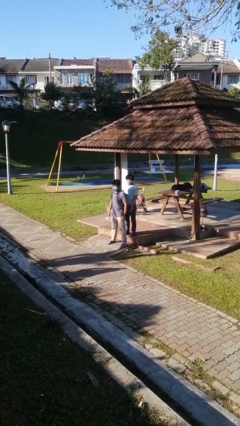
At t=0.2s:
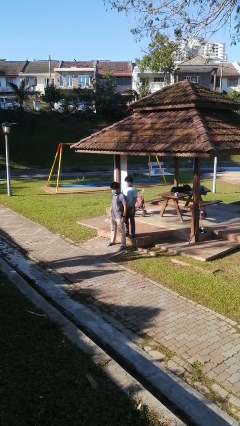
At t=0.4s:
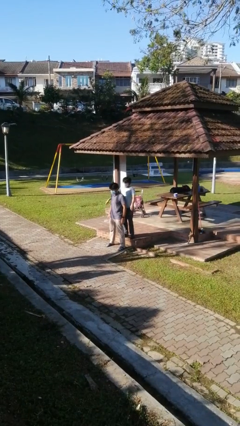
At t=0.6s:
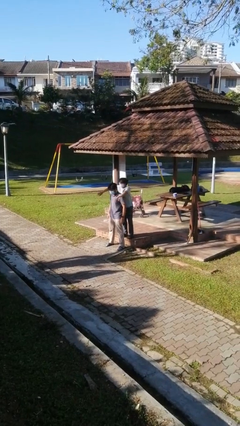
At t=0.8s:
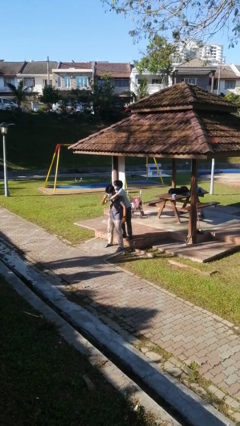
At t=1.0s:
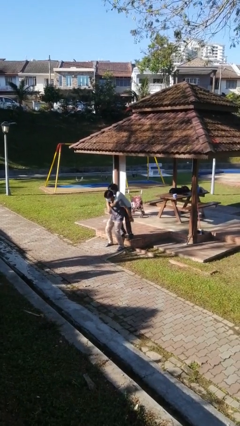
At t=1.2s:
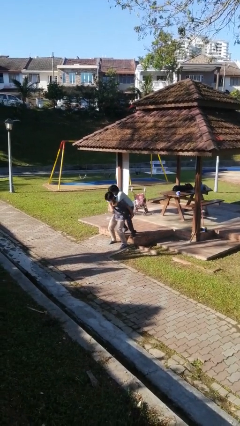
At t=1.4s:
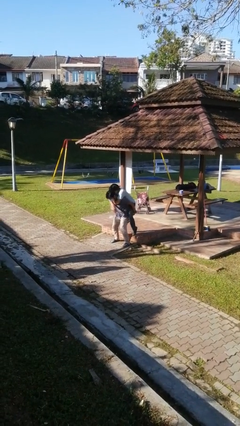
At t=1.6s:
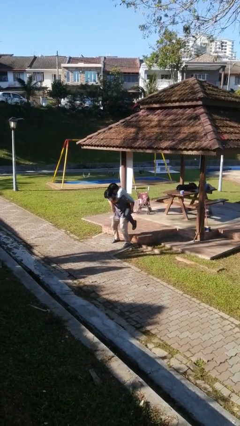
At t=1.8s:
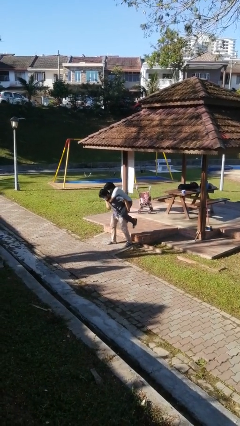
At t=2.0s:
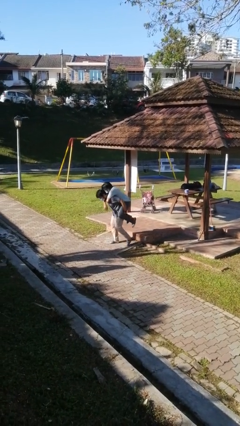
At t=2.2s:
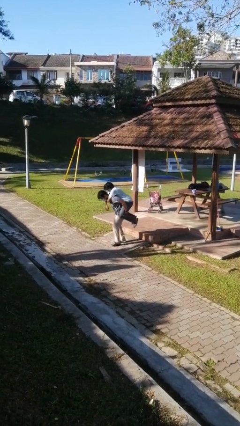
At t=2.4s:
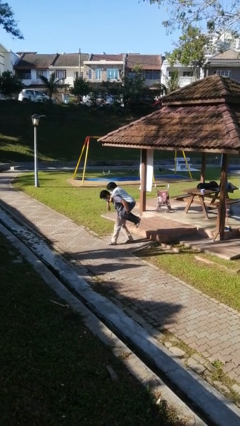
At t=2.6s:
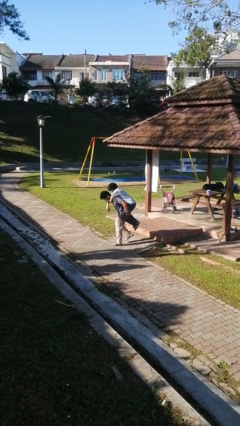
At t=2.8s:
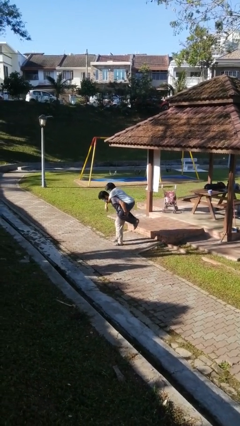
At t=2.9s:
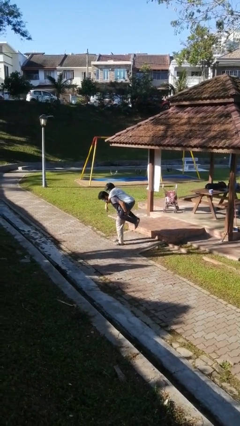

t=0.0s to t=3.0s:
person carries person over shoulder

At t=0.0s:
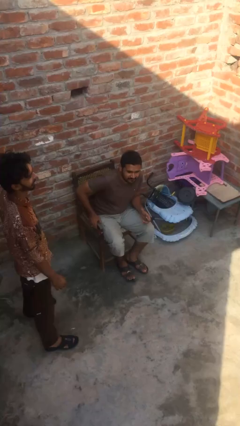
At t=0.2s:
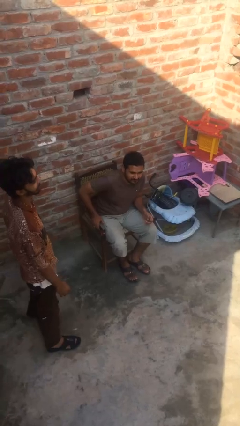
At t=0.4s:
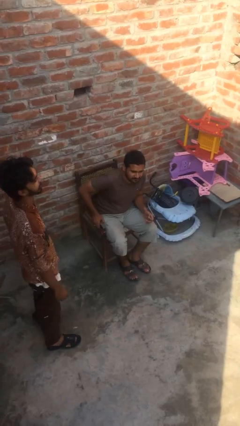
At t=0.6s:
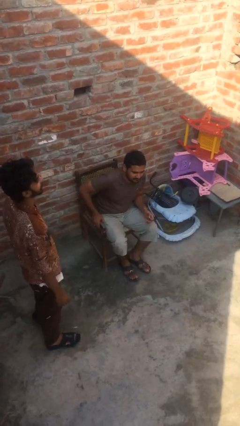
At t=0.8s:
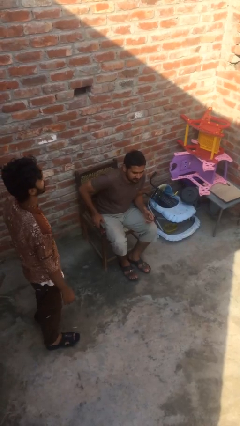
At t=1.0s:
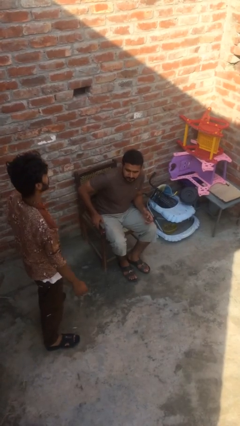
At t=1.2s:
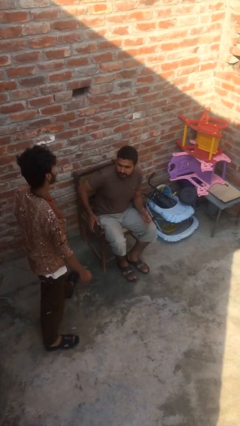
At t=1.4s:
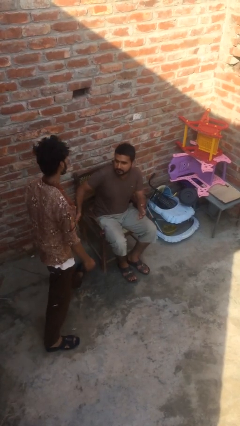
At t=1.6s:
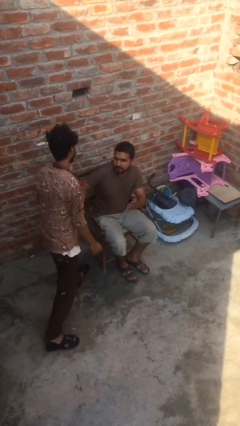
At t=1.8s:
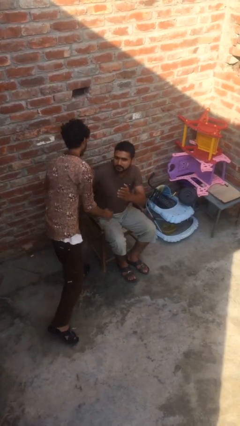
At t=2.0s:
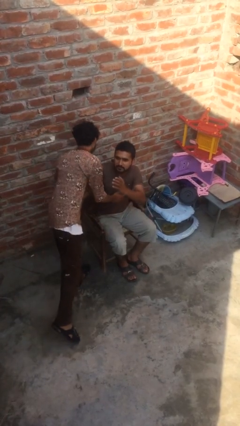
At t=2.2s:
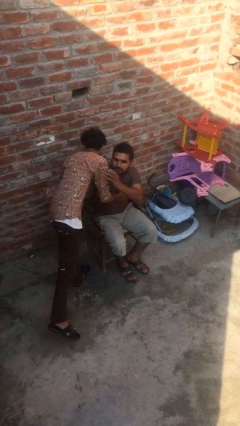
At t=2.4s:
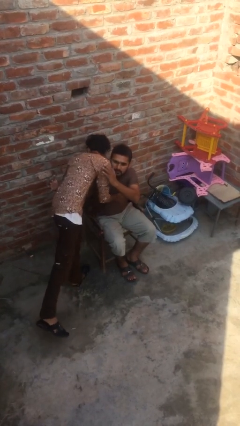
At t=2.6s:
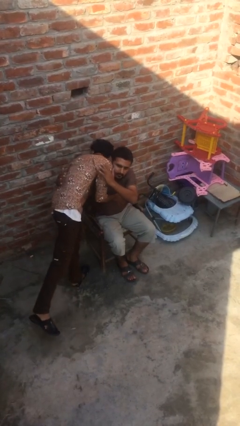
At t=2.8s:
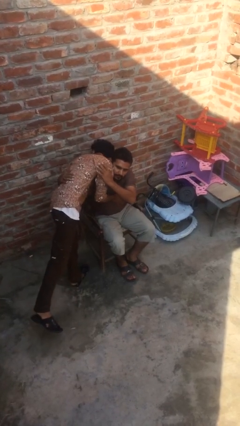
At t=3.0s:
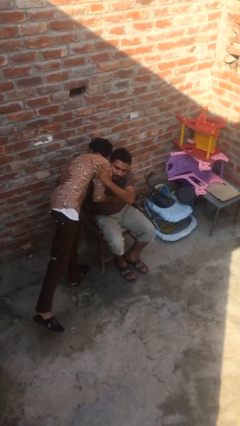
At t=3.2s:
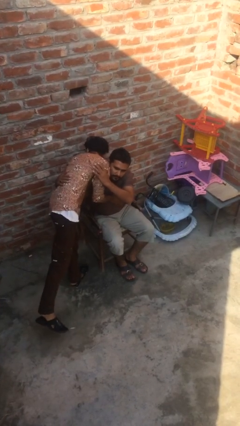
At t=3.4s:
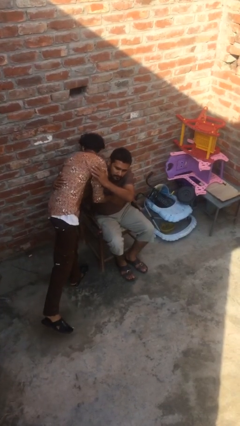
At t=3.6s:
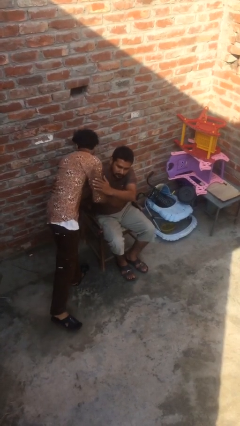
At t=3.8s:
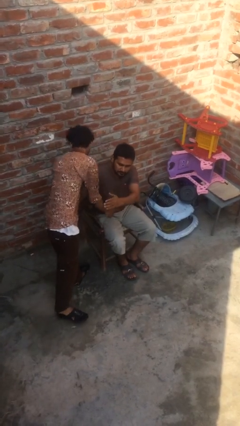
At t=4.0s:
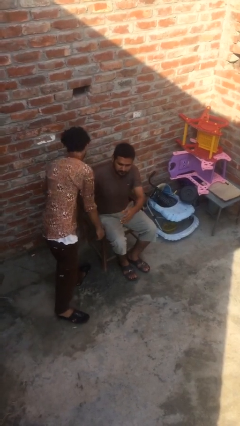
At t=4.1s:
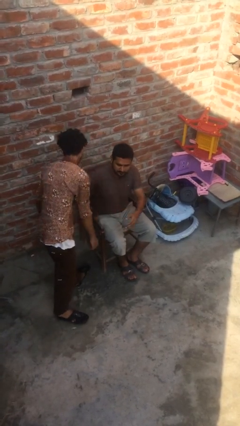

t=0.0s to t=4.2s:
person embraces person

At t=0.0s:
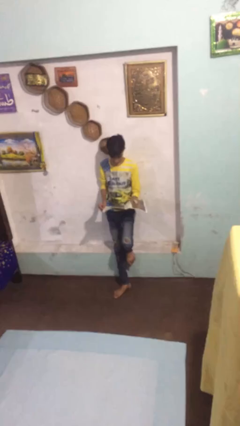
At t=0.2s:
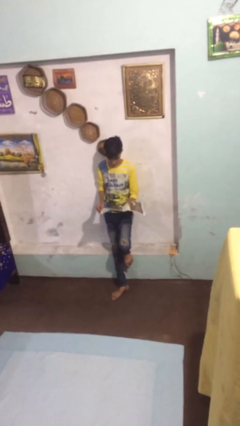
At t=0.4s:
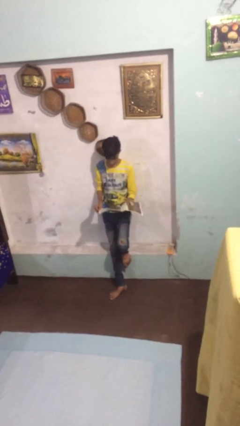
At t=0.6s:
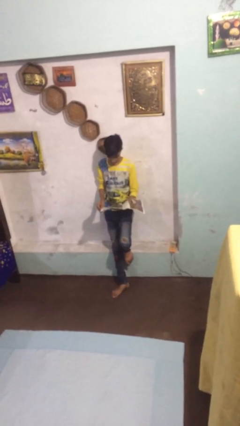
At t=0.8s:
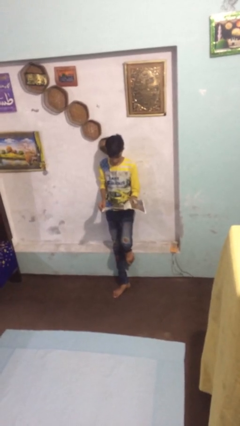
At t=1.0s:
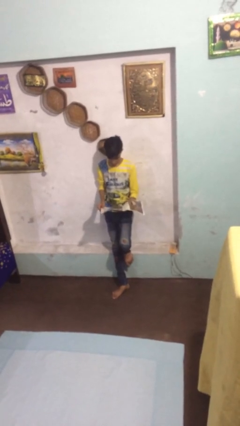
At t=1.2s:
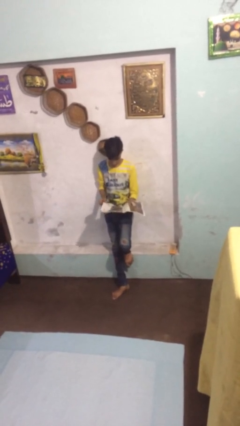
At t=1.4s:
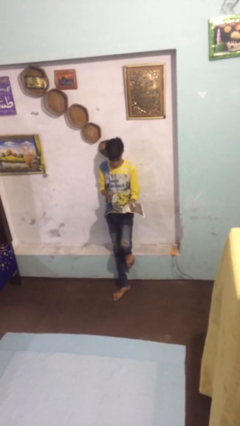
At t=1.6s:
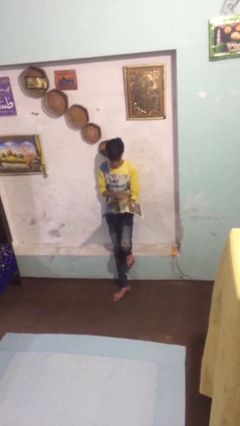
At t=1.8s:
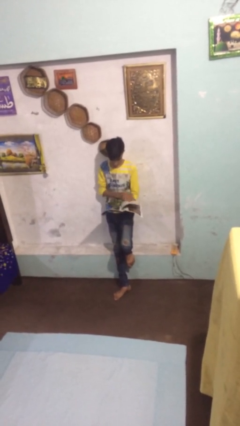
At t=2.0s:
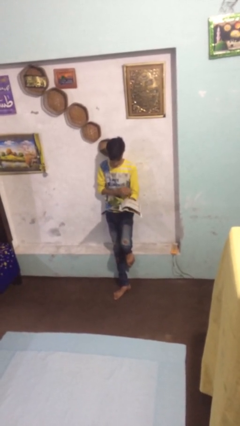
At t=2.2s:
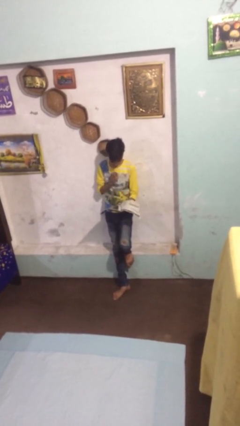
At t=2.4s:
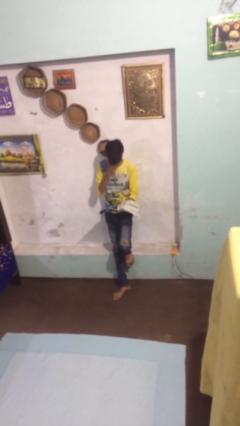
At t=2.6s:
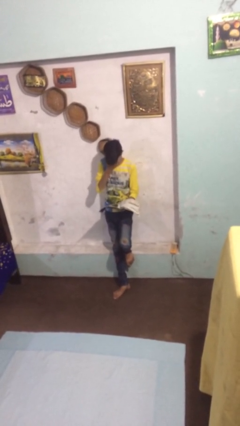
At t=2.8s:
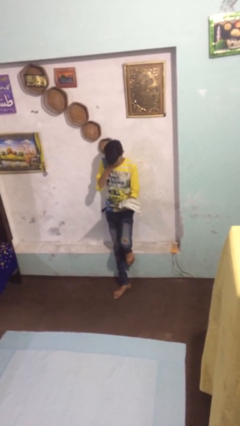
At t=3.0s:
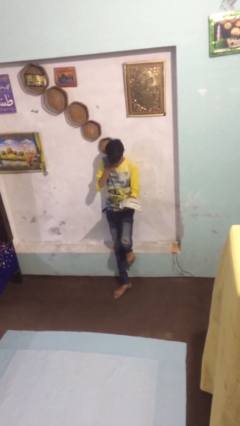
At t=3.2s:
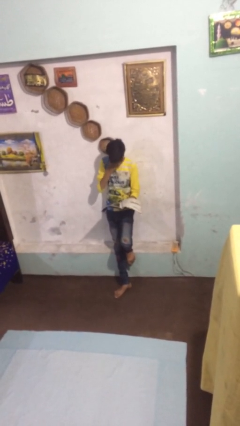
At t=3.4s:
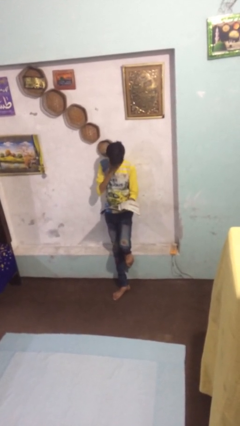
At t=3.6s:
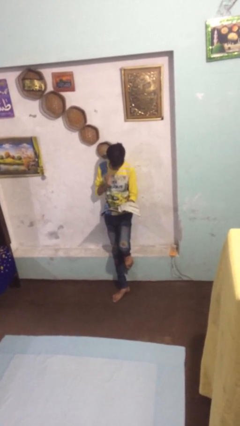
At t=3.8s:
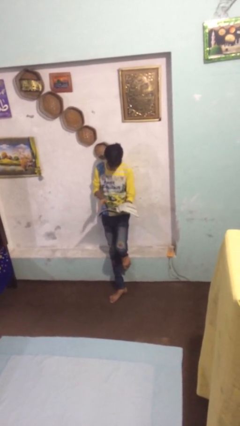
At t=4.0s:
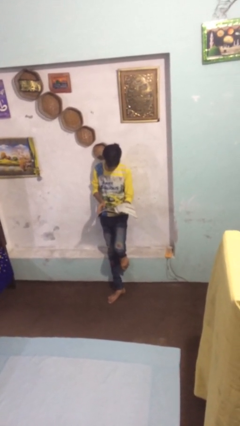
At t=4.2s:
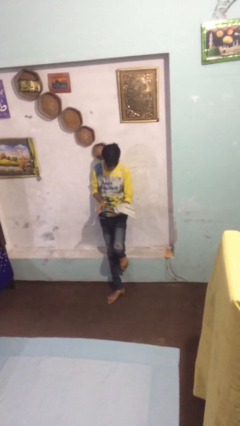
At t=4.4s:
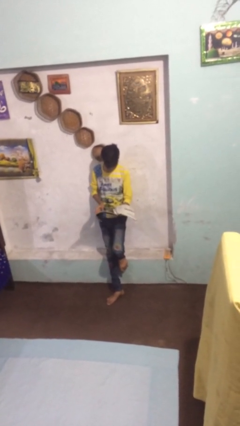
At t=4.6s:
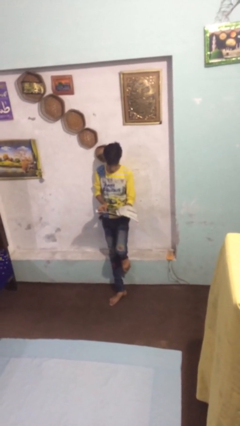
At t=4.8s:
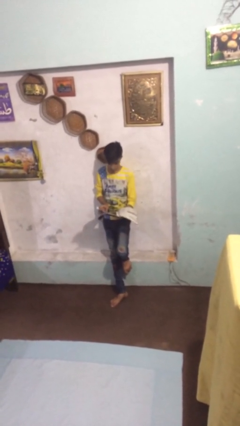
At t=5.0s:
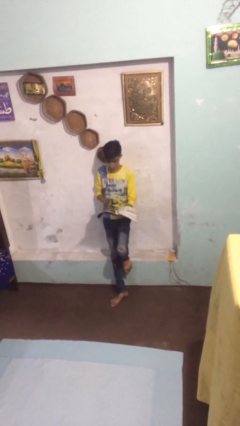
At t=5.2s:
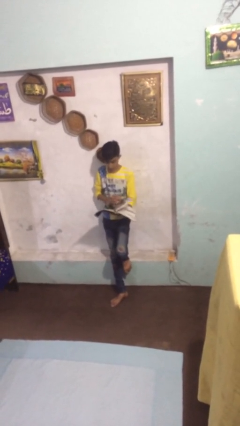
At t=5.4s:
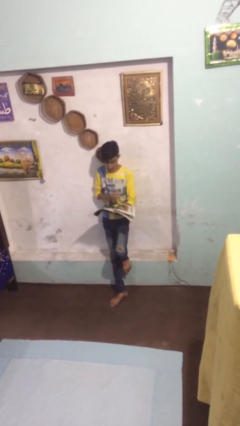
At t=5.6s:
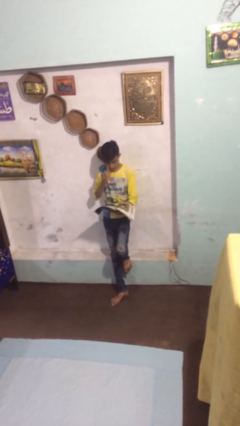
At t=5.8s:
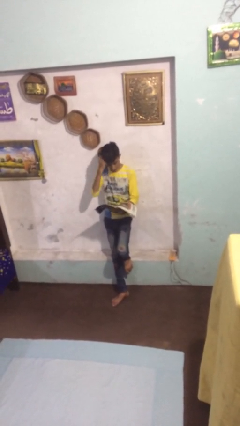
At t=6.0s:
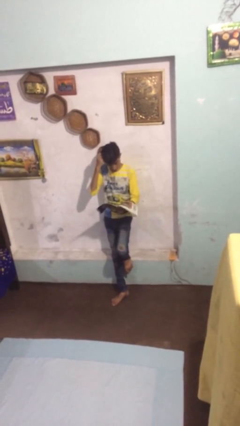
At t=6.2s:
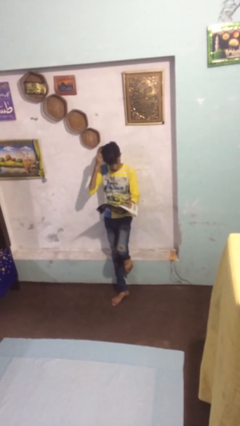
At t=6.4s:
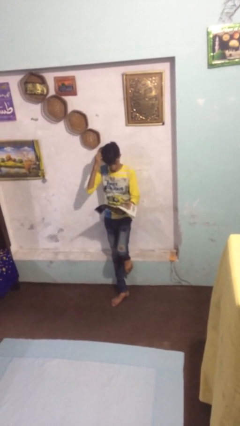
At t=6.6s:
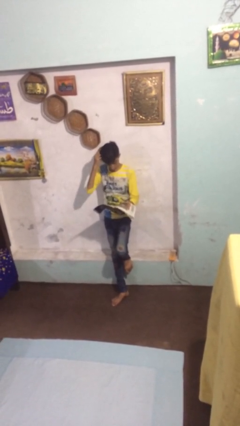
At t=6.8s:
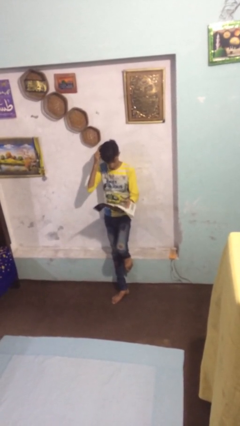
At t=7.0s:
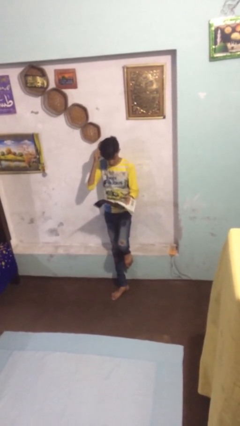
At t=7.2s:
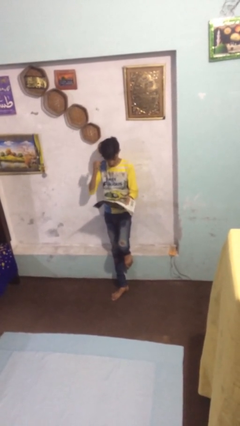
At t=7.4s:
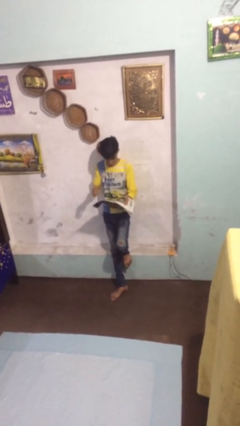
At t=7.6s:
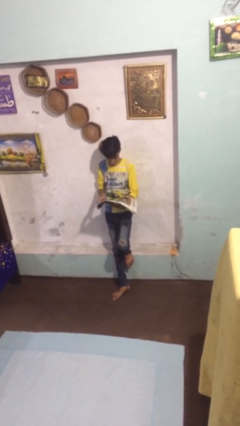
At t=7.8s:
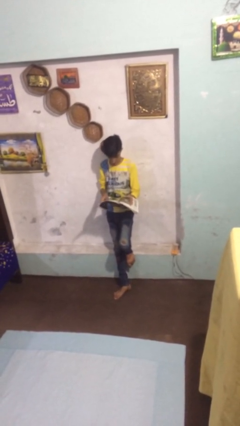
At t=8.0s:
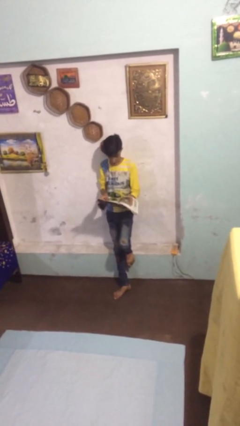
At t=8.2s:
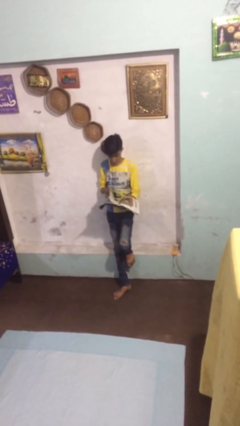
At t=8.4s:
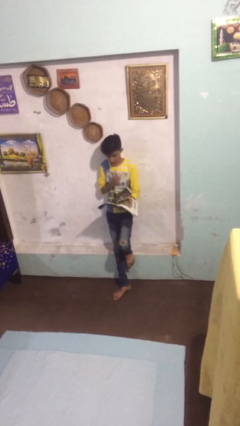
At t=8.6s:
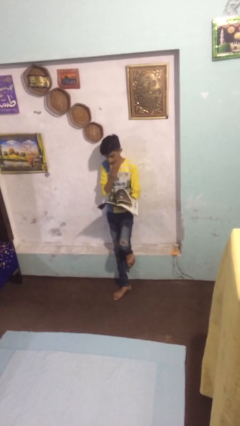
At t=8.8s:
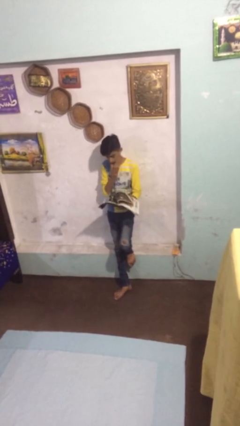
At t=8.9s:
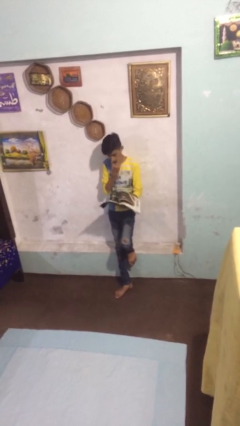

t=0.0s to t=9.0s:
person reads document

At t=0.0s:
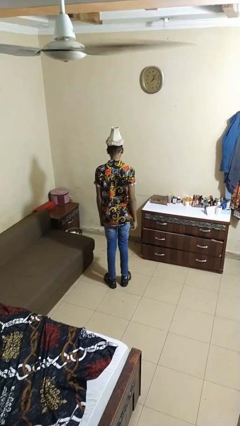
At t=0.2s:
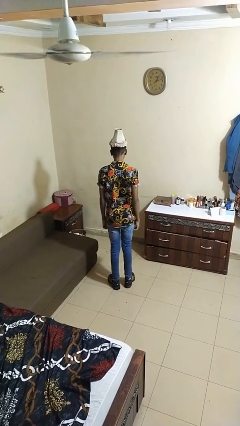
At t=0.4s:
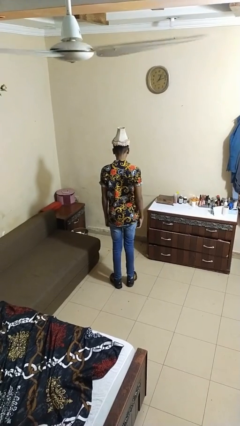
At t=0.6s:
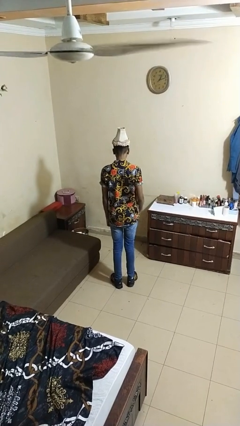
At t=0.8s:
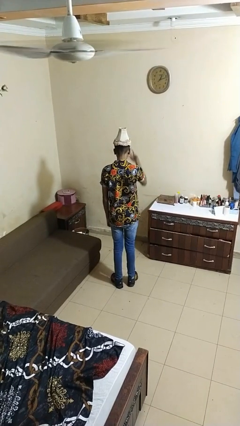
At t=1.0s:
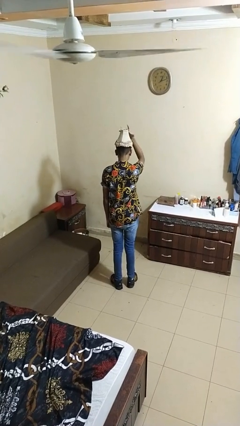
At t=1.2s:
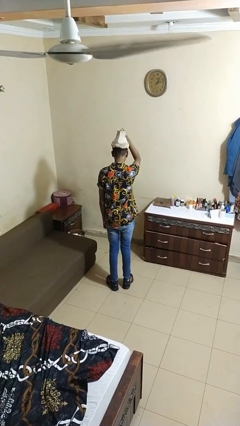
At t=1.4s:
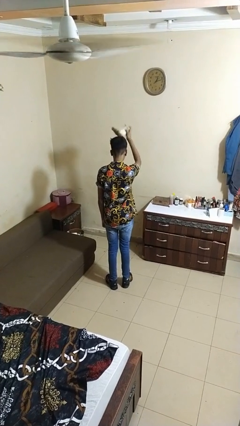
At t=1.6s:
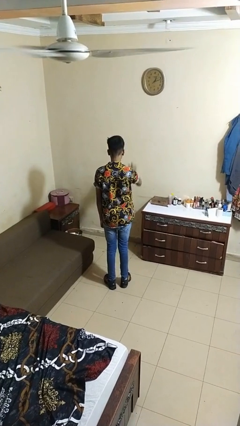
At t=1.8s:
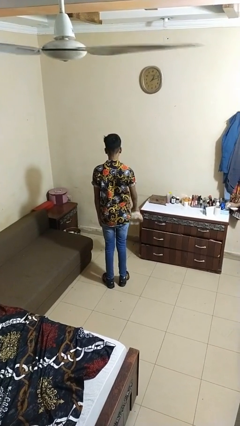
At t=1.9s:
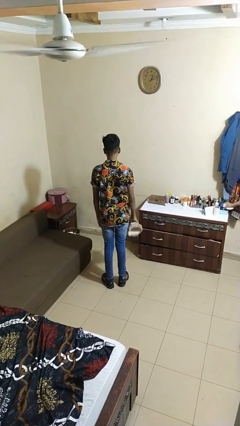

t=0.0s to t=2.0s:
person takes off hat
